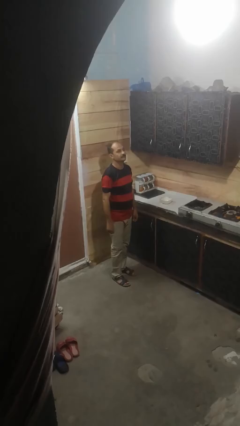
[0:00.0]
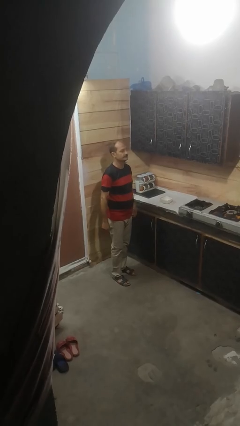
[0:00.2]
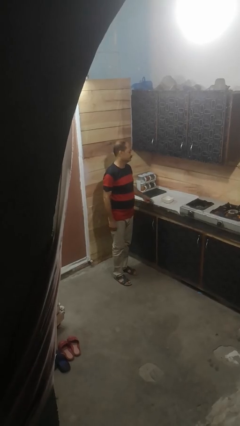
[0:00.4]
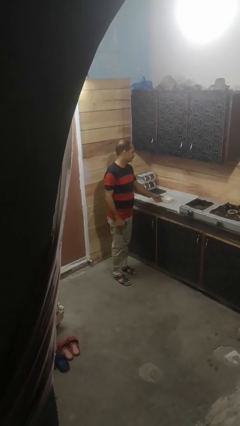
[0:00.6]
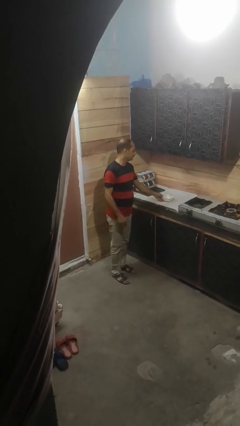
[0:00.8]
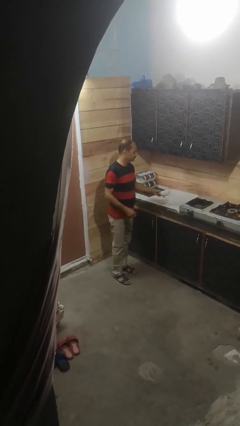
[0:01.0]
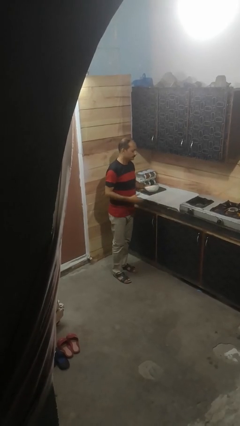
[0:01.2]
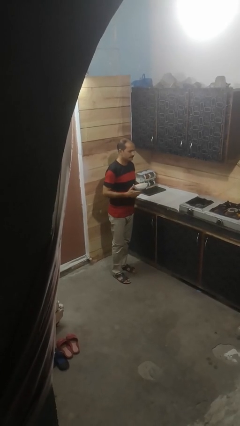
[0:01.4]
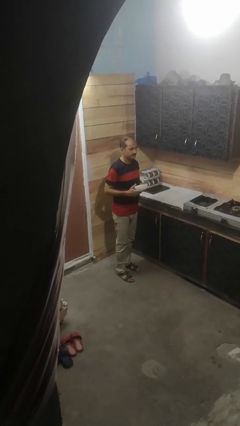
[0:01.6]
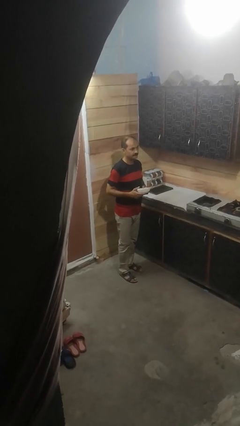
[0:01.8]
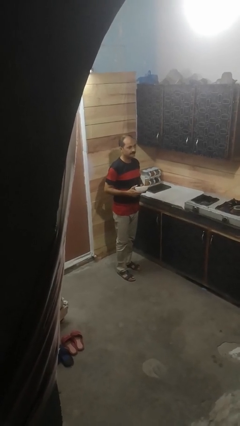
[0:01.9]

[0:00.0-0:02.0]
person picks up object from countertop

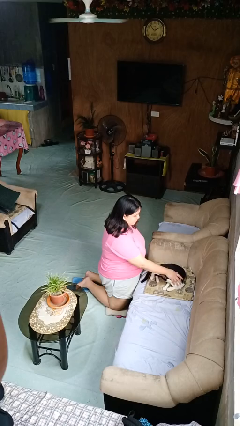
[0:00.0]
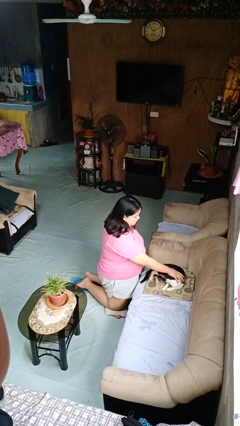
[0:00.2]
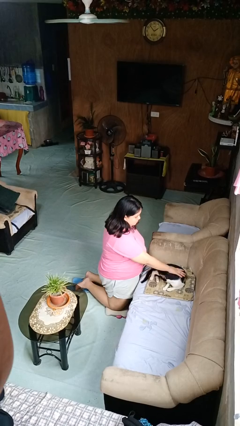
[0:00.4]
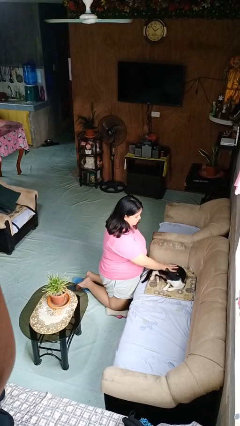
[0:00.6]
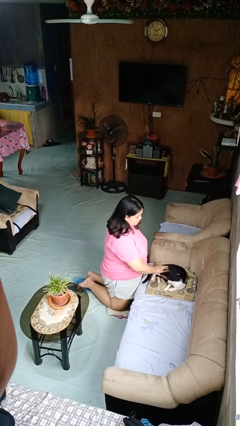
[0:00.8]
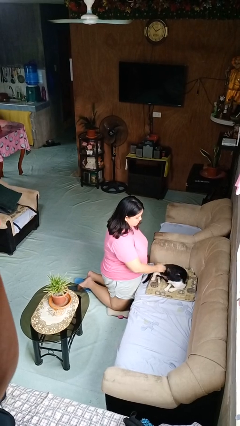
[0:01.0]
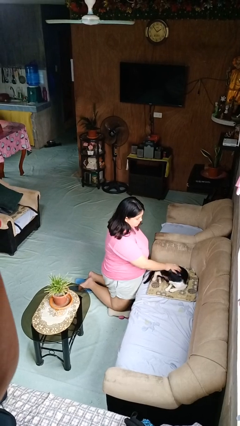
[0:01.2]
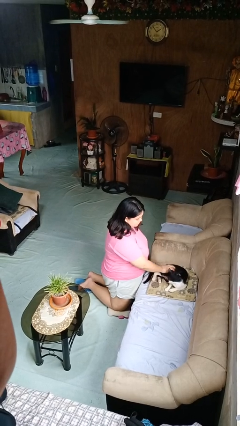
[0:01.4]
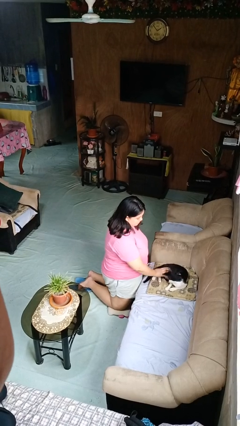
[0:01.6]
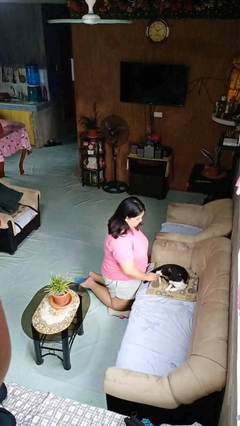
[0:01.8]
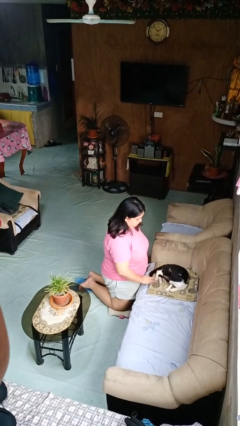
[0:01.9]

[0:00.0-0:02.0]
person pets cat

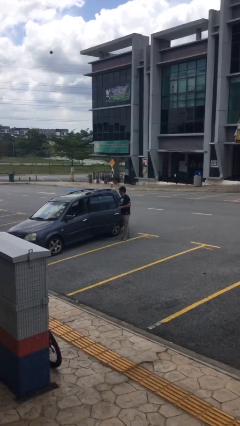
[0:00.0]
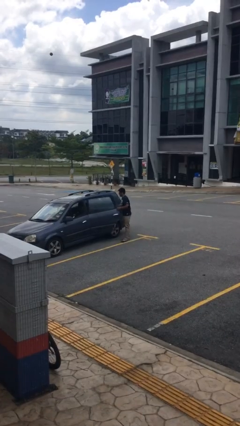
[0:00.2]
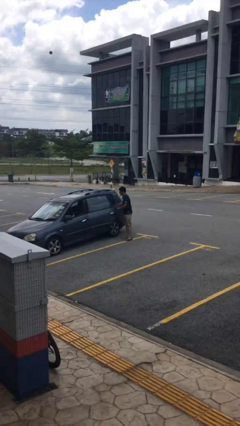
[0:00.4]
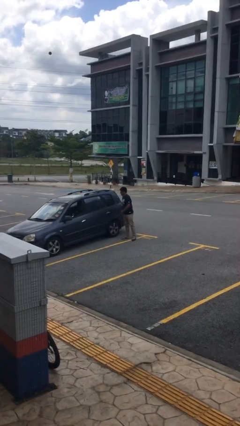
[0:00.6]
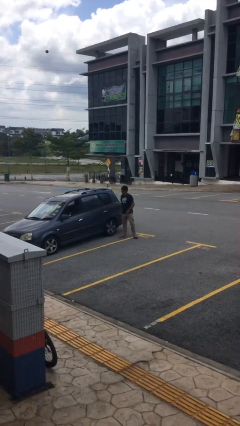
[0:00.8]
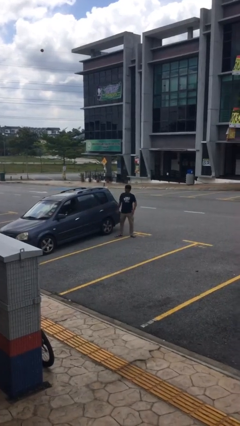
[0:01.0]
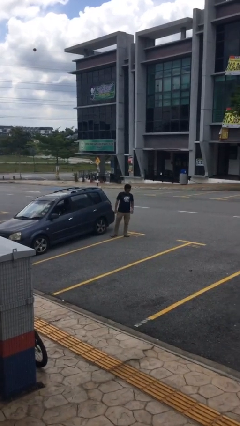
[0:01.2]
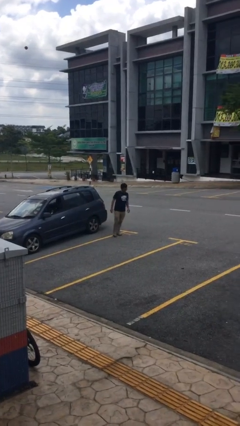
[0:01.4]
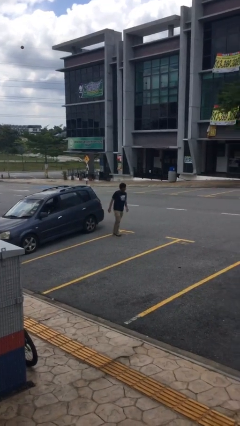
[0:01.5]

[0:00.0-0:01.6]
person closes car door

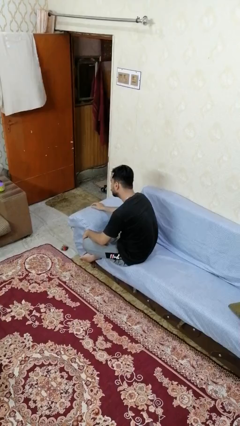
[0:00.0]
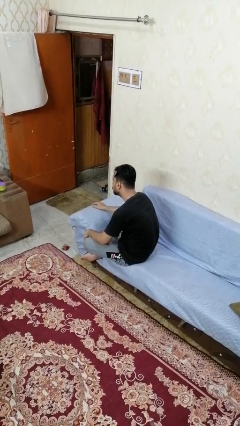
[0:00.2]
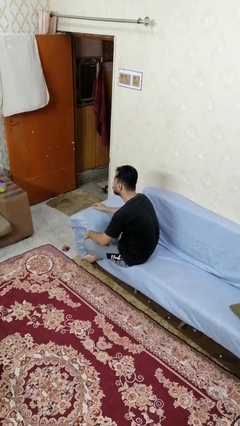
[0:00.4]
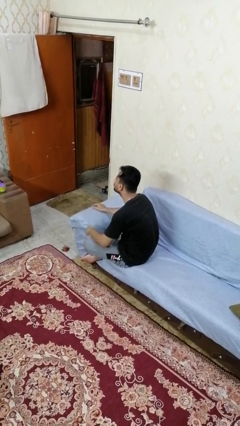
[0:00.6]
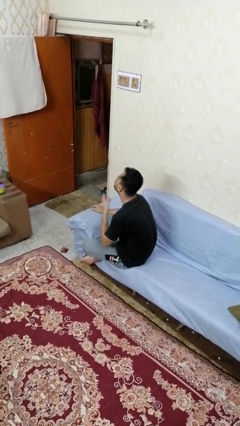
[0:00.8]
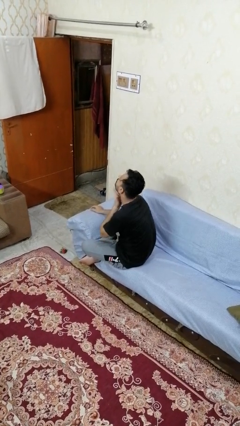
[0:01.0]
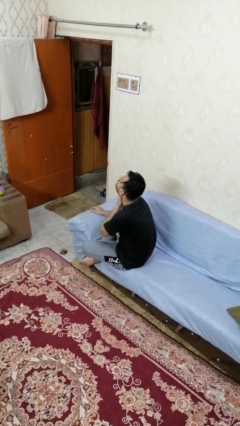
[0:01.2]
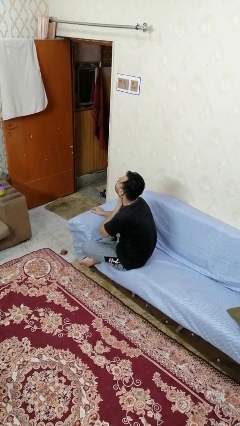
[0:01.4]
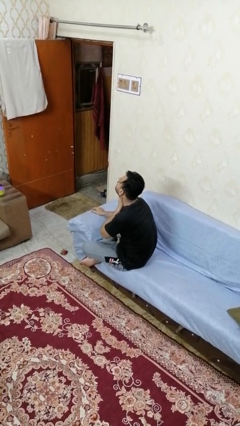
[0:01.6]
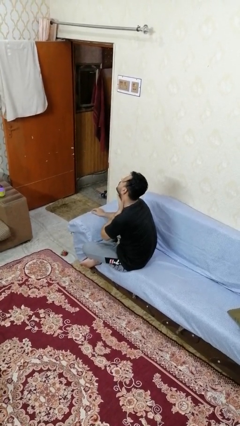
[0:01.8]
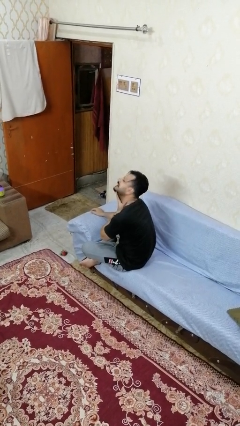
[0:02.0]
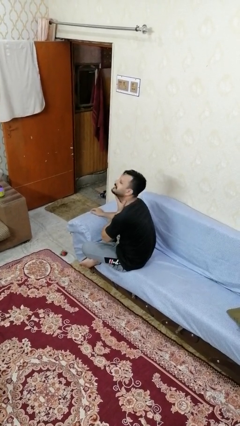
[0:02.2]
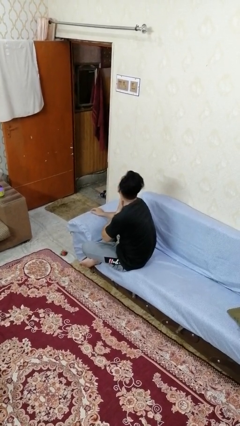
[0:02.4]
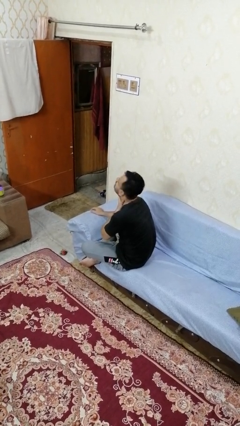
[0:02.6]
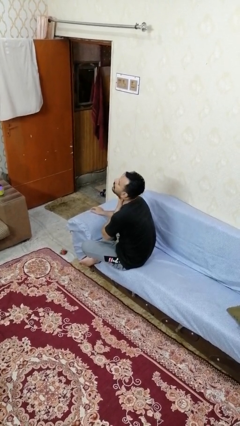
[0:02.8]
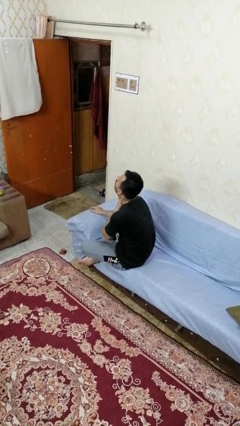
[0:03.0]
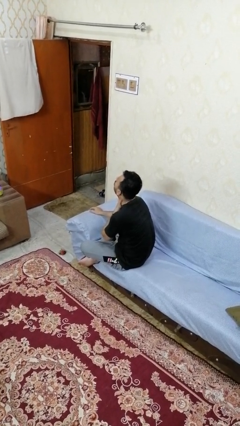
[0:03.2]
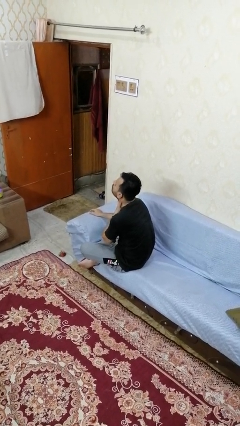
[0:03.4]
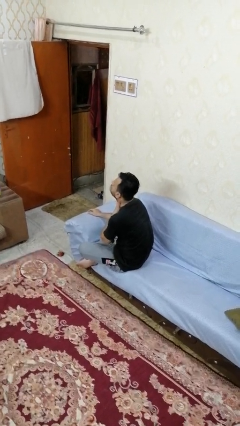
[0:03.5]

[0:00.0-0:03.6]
person rubs neck

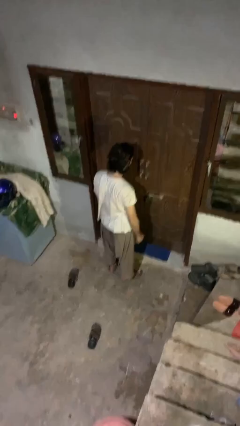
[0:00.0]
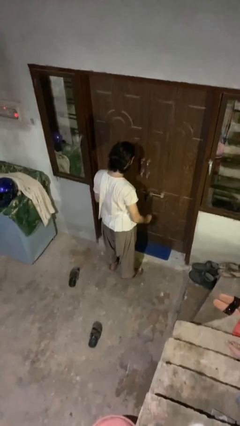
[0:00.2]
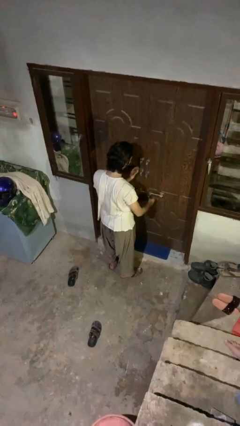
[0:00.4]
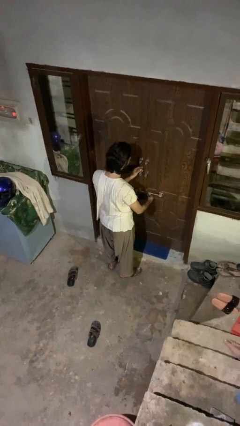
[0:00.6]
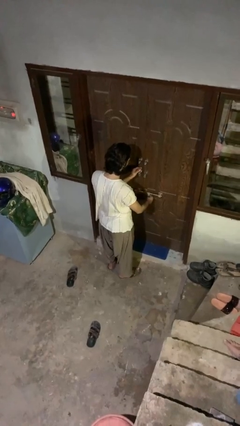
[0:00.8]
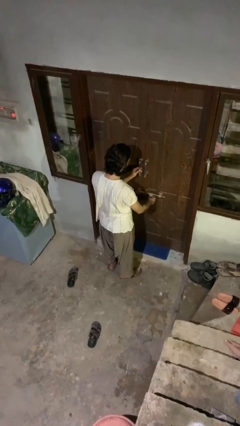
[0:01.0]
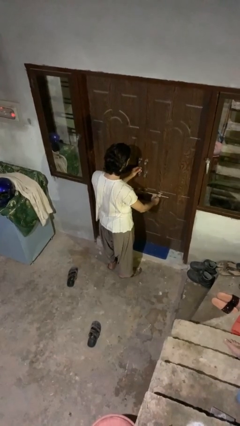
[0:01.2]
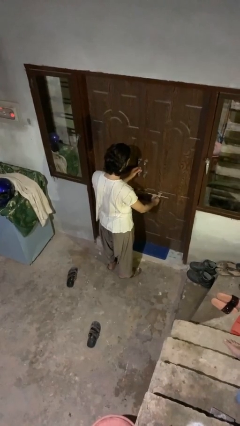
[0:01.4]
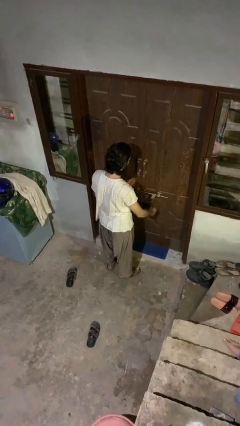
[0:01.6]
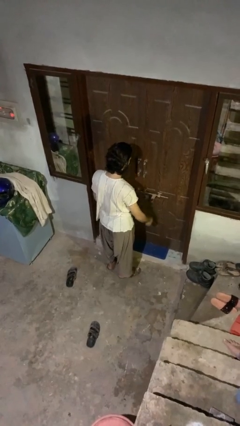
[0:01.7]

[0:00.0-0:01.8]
person unlocks door with keys

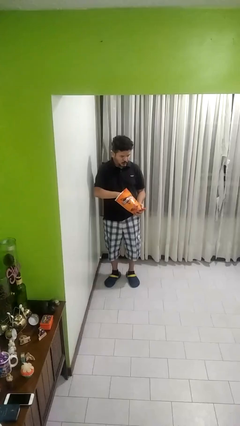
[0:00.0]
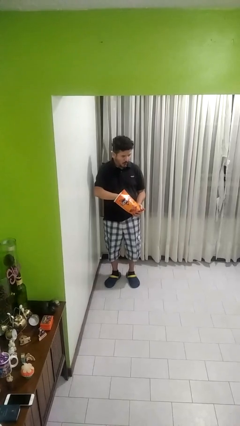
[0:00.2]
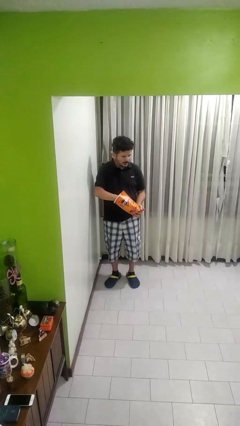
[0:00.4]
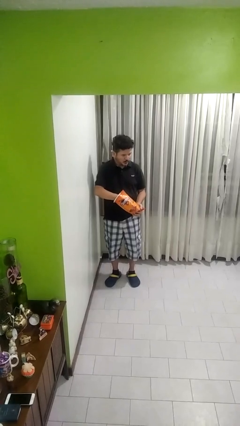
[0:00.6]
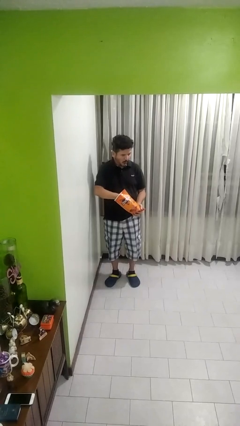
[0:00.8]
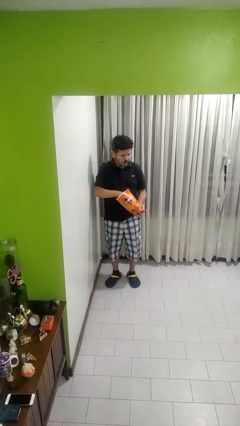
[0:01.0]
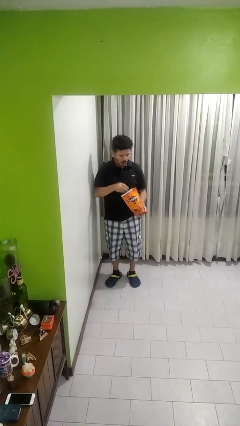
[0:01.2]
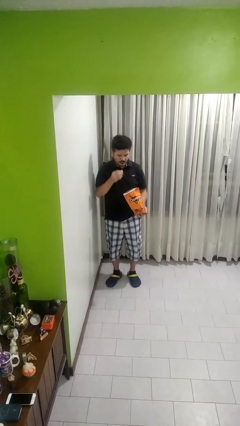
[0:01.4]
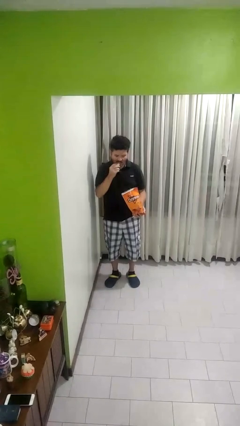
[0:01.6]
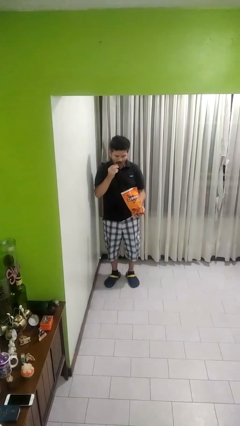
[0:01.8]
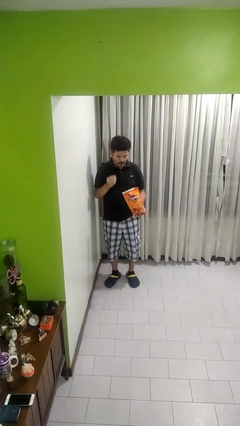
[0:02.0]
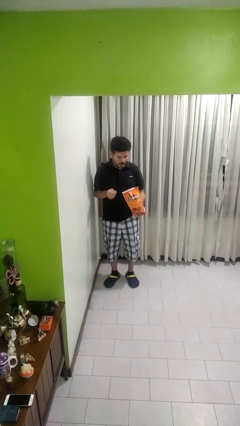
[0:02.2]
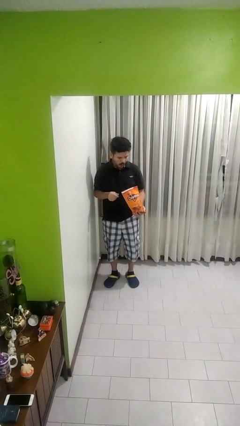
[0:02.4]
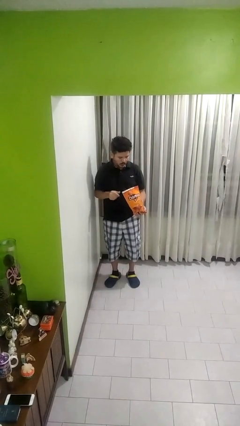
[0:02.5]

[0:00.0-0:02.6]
person eats snack from bag

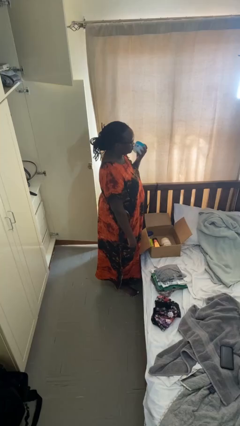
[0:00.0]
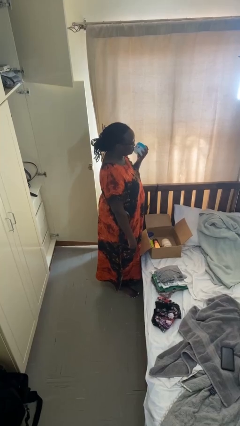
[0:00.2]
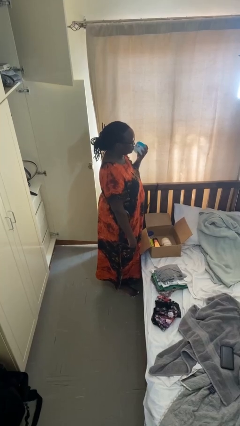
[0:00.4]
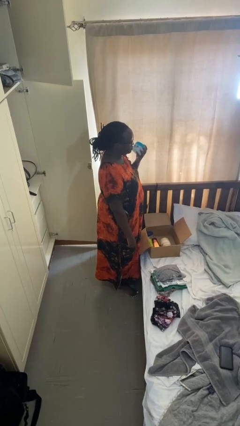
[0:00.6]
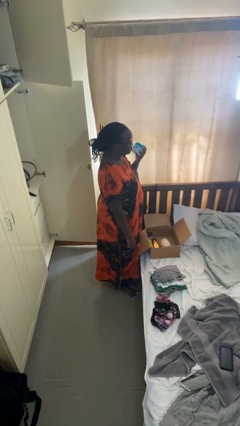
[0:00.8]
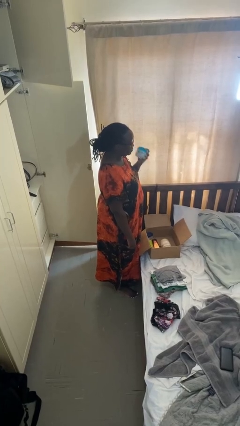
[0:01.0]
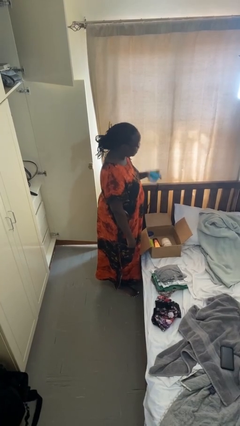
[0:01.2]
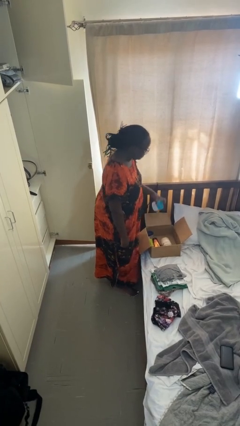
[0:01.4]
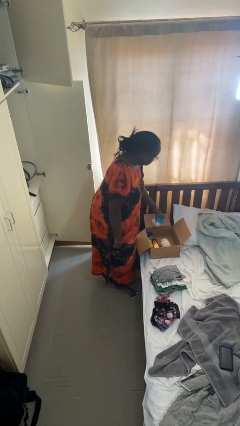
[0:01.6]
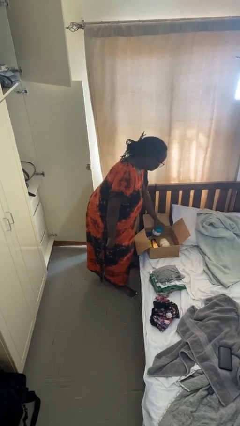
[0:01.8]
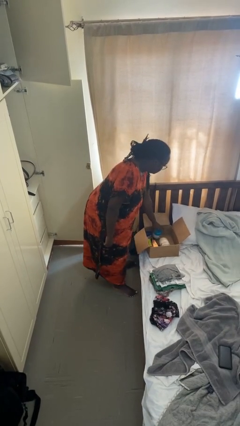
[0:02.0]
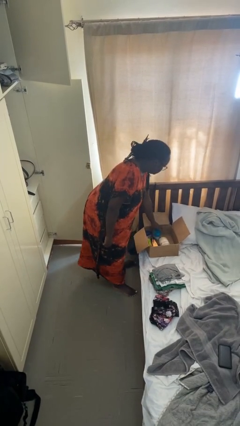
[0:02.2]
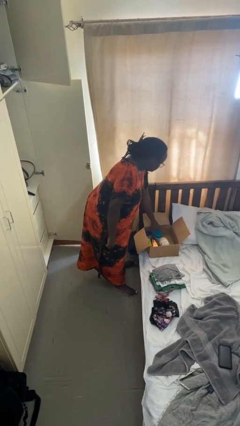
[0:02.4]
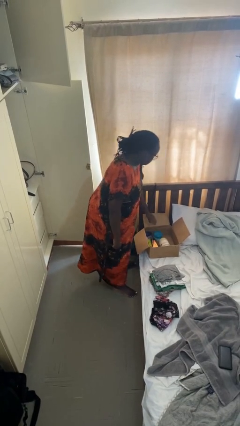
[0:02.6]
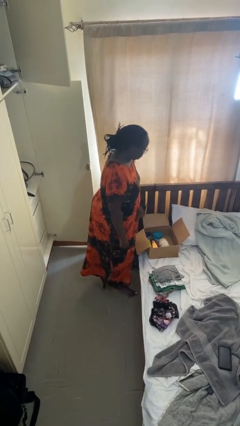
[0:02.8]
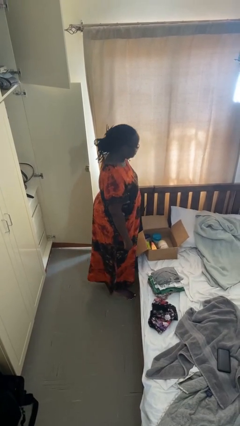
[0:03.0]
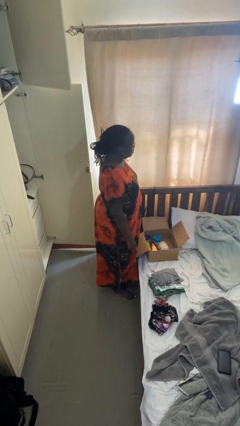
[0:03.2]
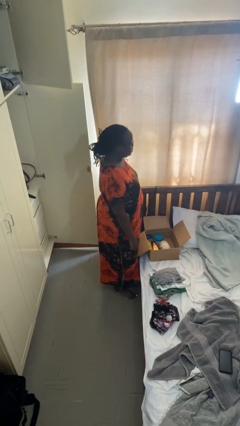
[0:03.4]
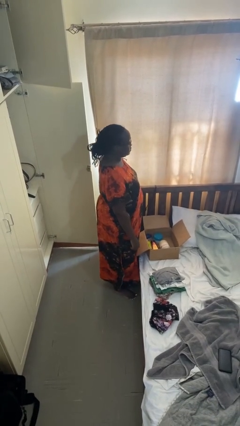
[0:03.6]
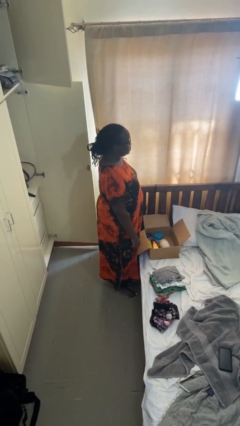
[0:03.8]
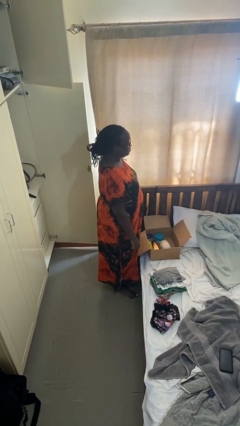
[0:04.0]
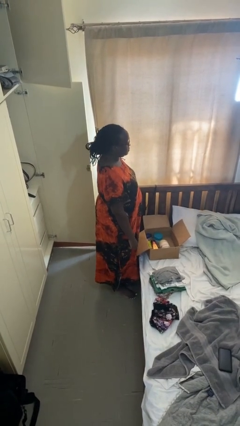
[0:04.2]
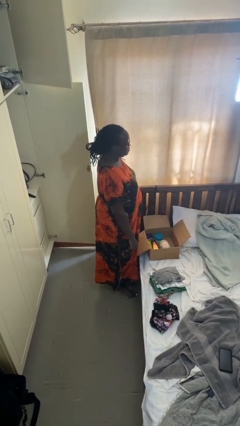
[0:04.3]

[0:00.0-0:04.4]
person puts object into box
